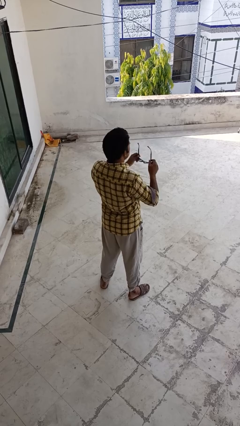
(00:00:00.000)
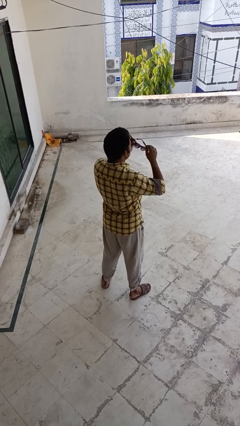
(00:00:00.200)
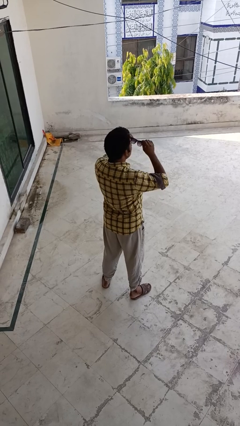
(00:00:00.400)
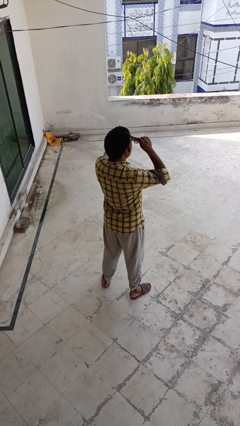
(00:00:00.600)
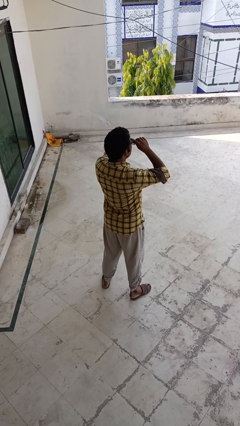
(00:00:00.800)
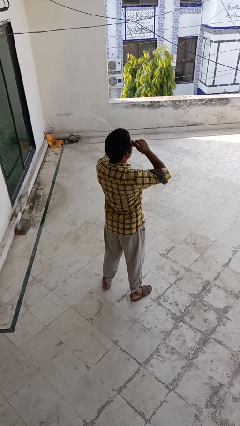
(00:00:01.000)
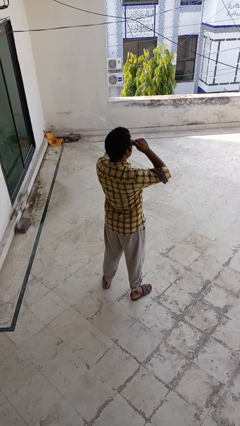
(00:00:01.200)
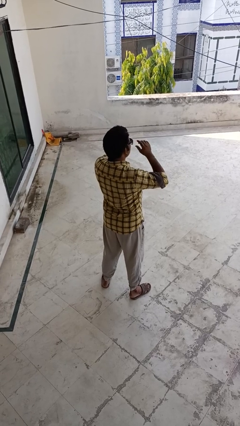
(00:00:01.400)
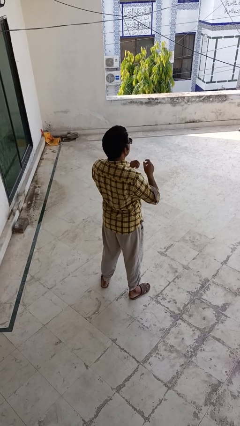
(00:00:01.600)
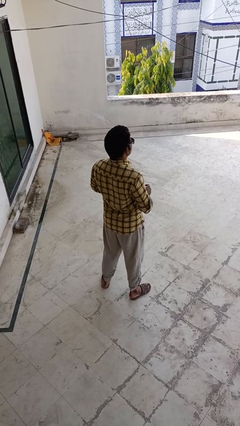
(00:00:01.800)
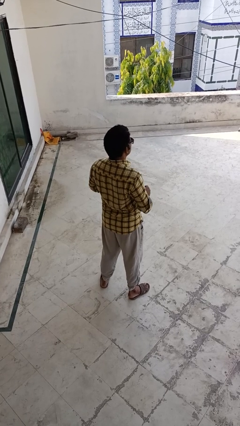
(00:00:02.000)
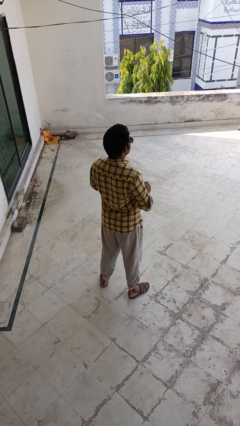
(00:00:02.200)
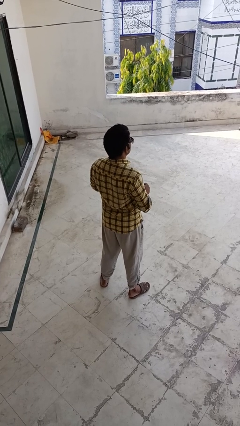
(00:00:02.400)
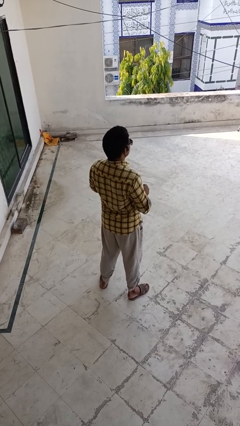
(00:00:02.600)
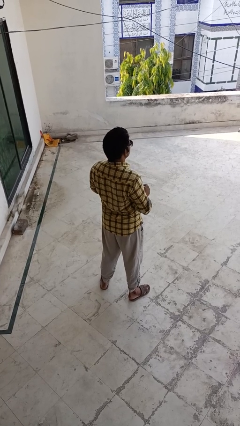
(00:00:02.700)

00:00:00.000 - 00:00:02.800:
person puts on sunglasses

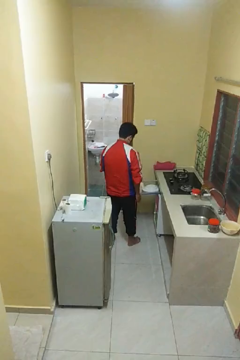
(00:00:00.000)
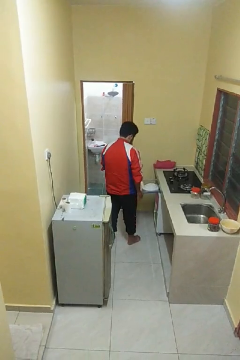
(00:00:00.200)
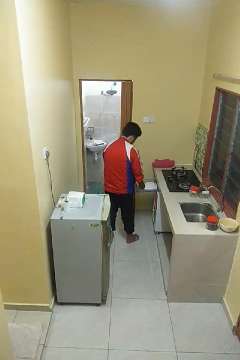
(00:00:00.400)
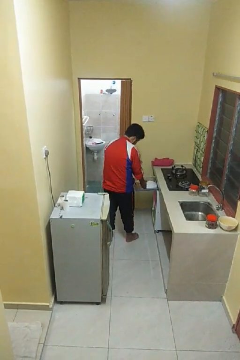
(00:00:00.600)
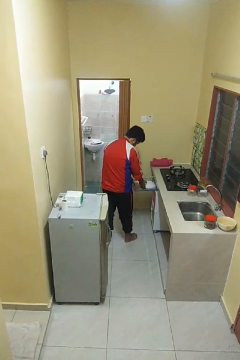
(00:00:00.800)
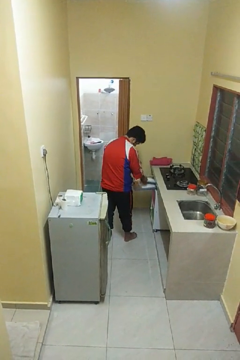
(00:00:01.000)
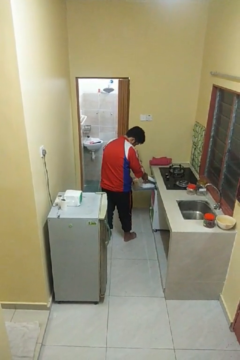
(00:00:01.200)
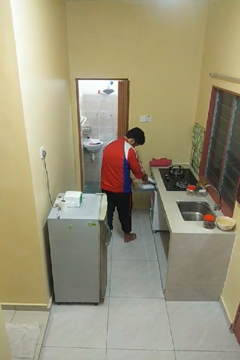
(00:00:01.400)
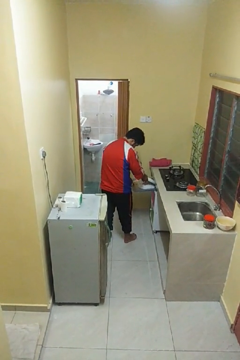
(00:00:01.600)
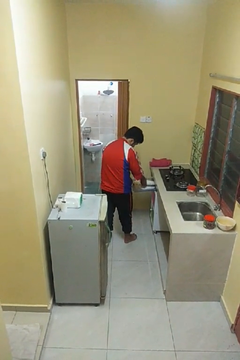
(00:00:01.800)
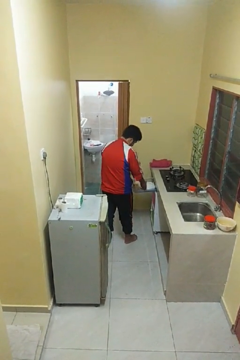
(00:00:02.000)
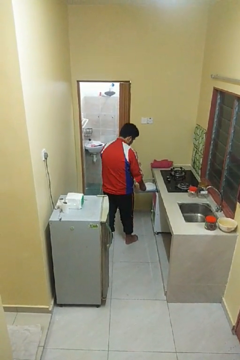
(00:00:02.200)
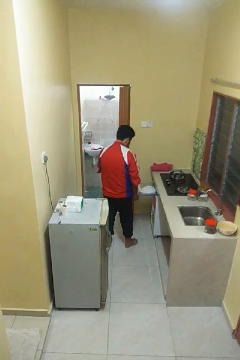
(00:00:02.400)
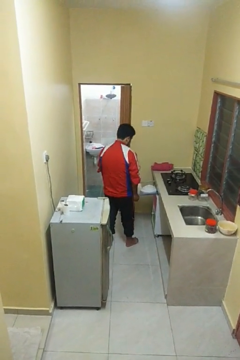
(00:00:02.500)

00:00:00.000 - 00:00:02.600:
person searches in kitchen drawer

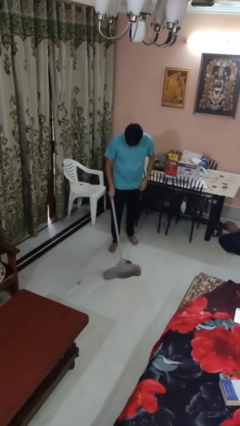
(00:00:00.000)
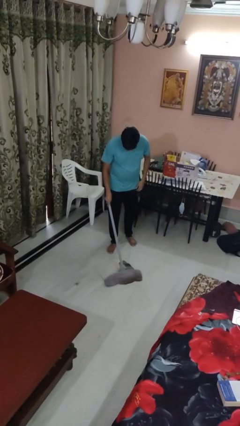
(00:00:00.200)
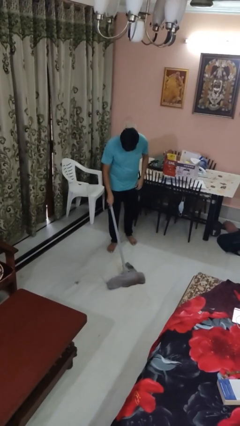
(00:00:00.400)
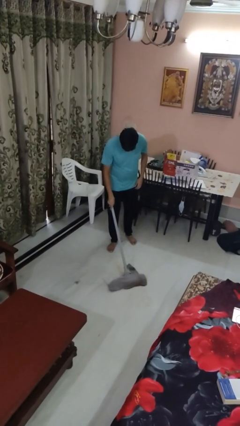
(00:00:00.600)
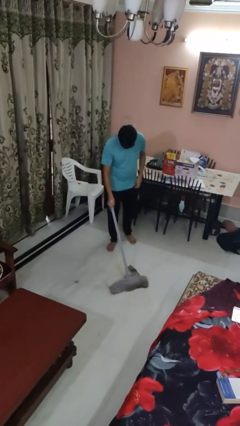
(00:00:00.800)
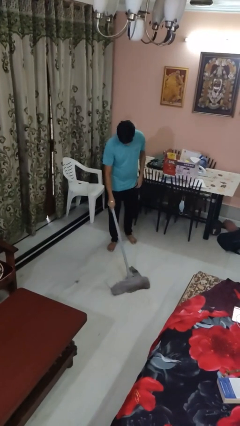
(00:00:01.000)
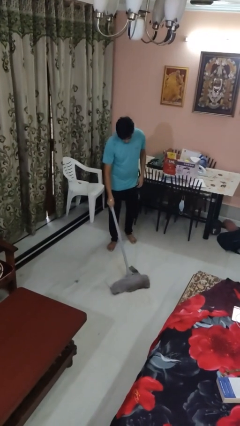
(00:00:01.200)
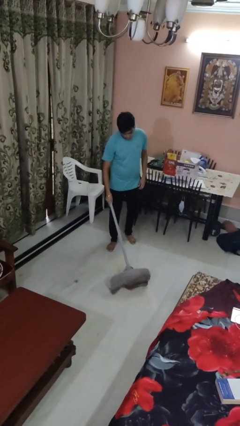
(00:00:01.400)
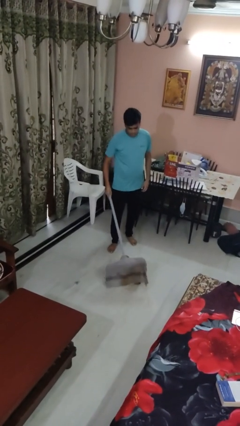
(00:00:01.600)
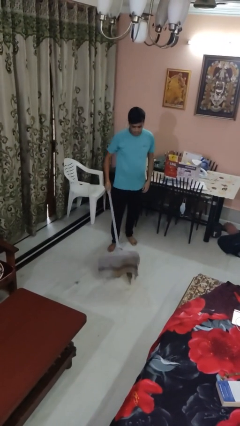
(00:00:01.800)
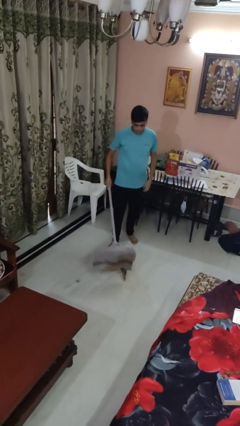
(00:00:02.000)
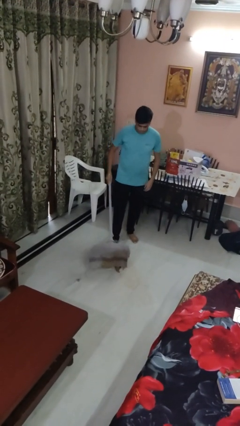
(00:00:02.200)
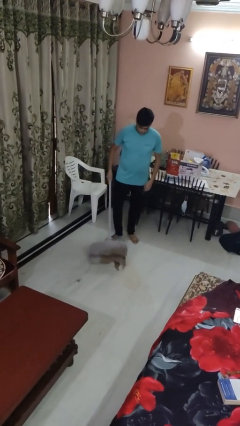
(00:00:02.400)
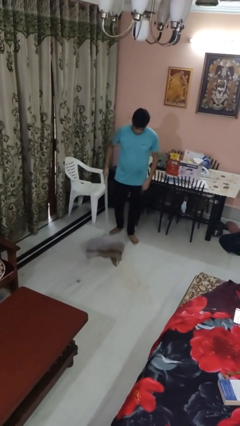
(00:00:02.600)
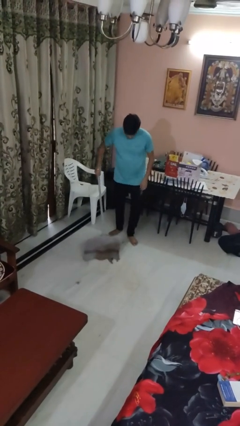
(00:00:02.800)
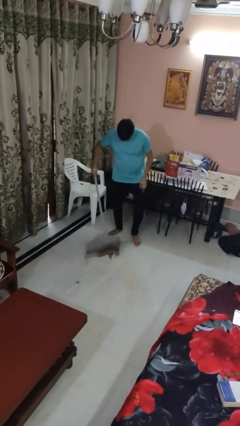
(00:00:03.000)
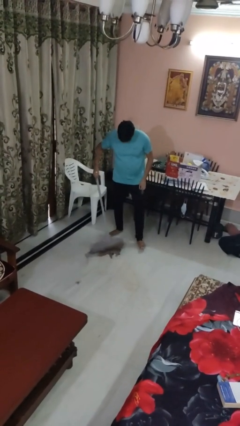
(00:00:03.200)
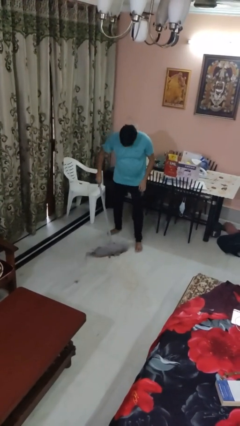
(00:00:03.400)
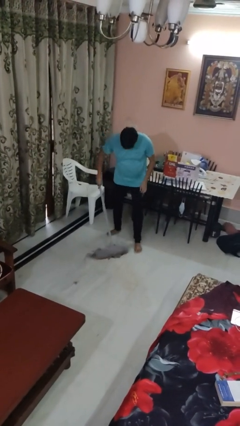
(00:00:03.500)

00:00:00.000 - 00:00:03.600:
person mops

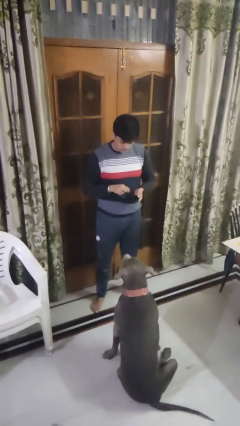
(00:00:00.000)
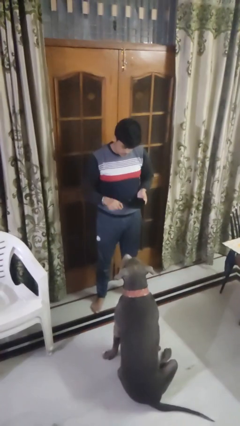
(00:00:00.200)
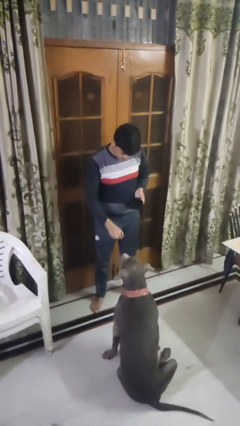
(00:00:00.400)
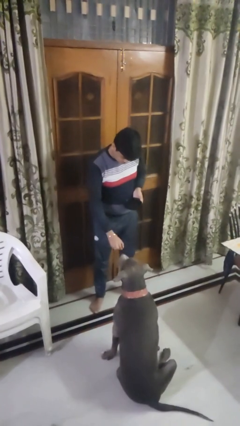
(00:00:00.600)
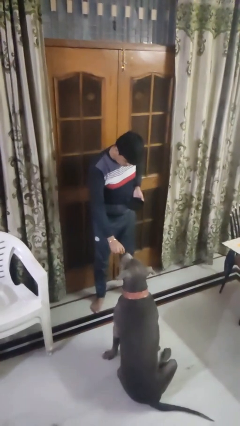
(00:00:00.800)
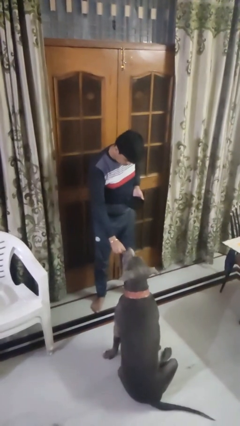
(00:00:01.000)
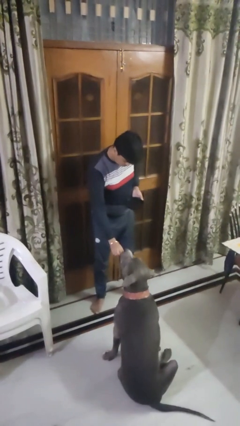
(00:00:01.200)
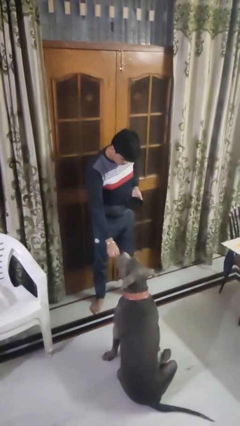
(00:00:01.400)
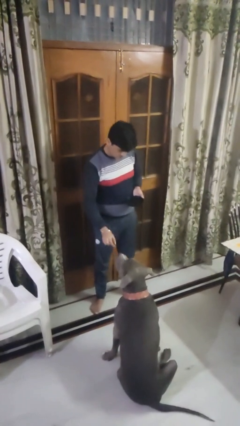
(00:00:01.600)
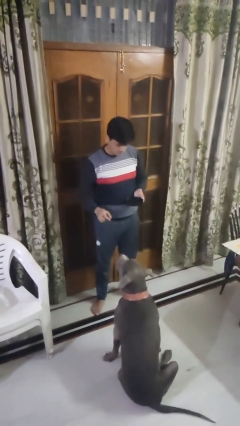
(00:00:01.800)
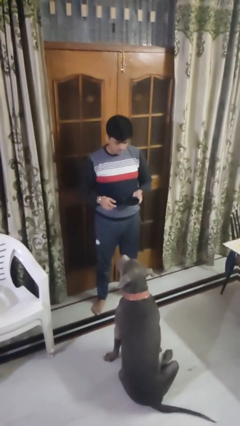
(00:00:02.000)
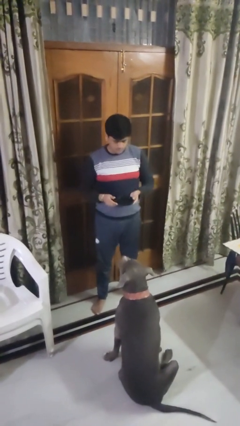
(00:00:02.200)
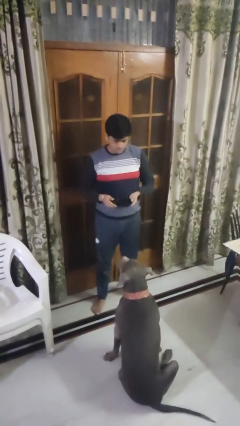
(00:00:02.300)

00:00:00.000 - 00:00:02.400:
person feeds dog

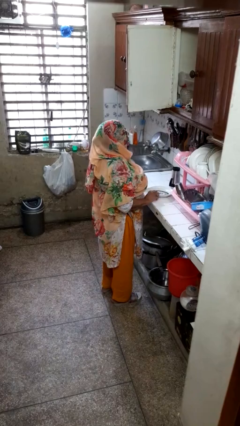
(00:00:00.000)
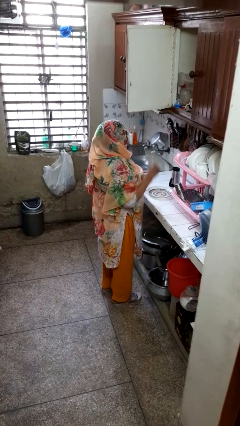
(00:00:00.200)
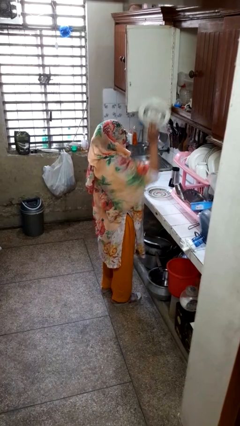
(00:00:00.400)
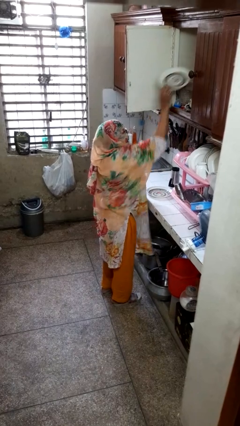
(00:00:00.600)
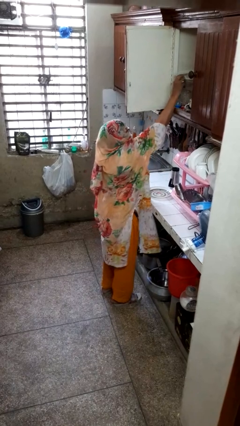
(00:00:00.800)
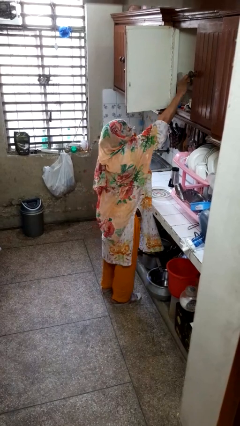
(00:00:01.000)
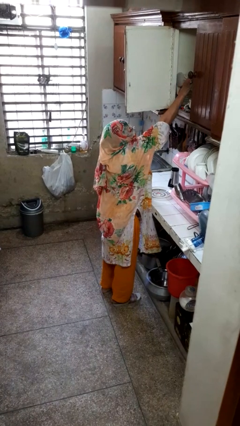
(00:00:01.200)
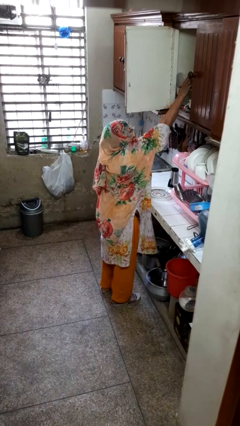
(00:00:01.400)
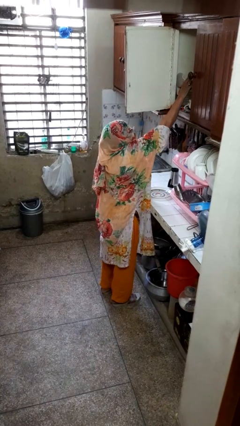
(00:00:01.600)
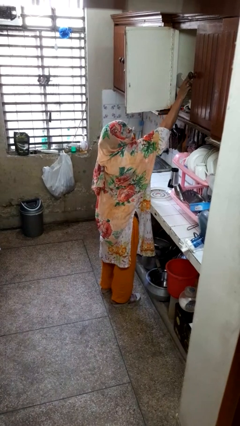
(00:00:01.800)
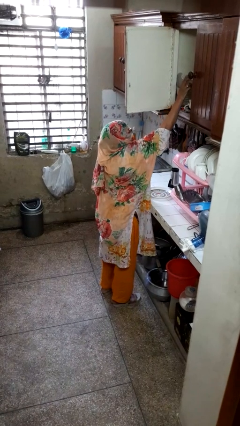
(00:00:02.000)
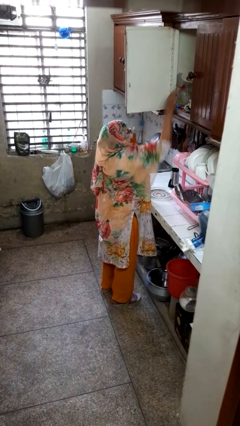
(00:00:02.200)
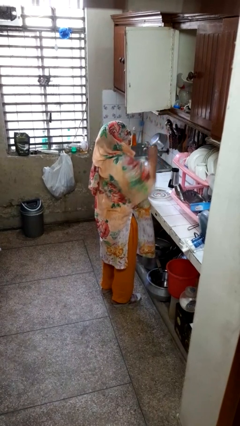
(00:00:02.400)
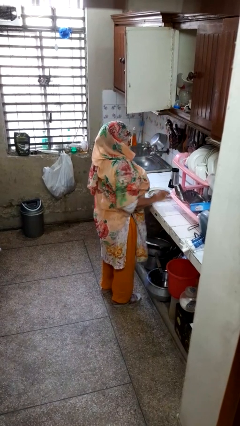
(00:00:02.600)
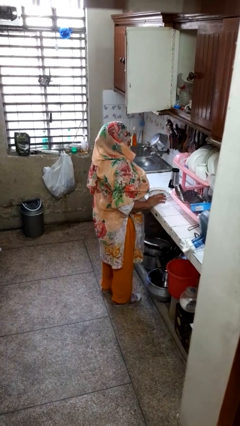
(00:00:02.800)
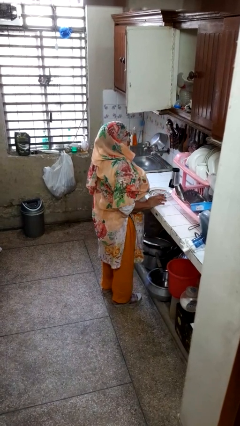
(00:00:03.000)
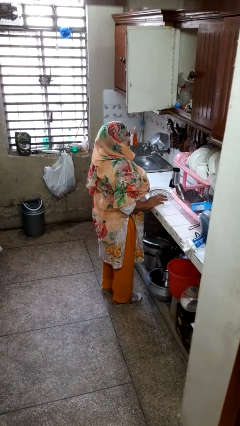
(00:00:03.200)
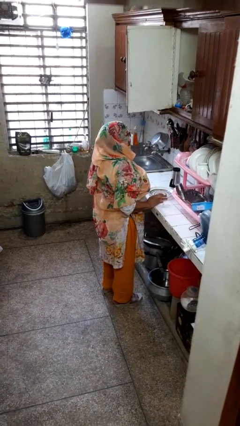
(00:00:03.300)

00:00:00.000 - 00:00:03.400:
person puts object in cabinet

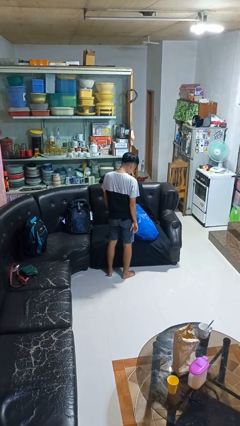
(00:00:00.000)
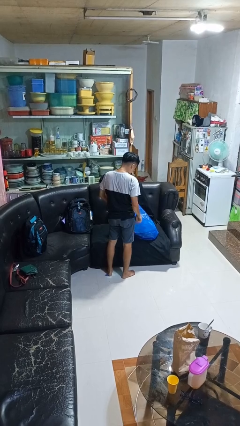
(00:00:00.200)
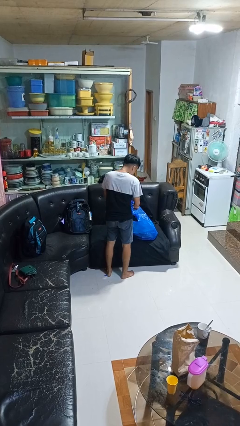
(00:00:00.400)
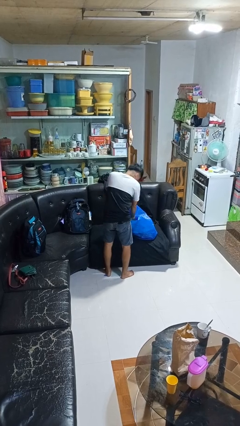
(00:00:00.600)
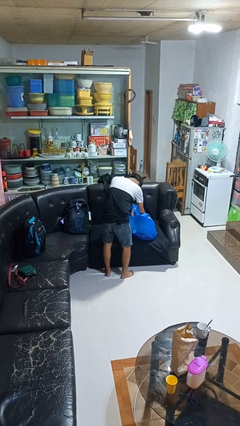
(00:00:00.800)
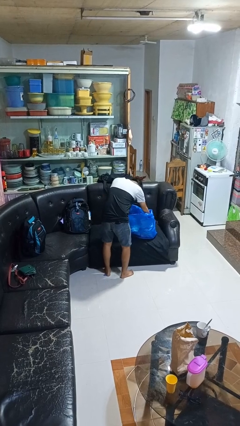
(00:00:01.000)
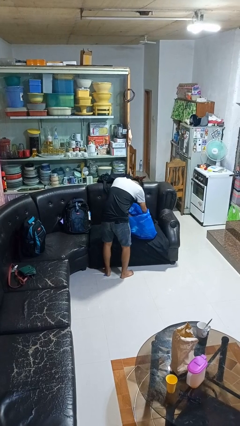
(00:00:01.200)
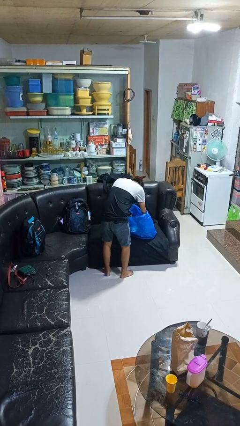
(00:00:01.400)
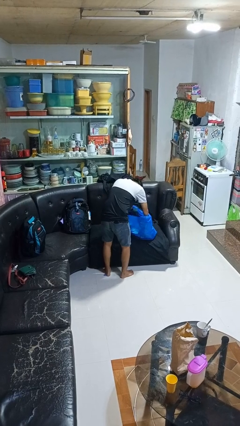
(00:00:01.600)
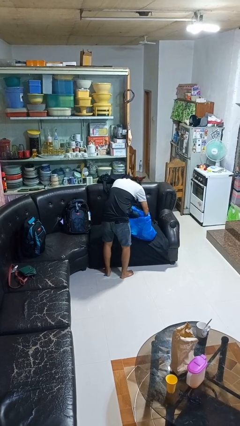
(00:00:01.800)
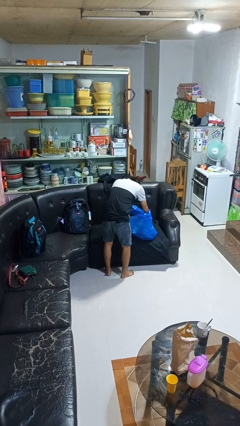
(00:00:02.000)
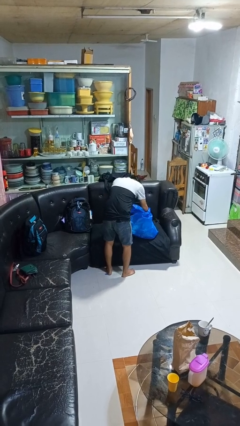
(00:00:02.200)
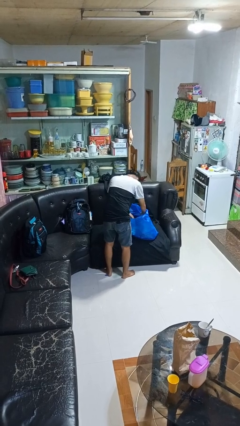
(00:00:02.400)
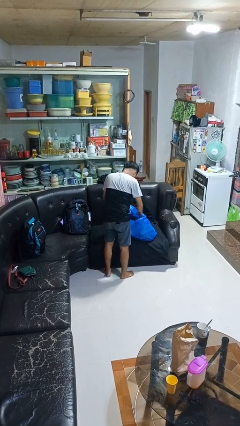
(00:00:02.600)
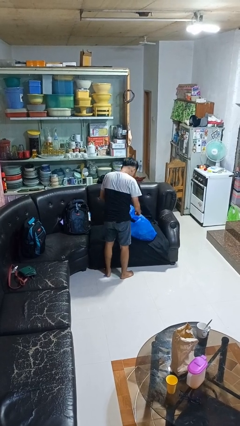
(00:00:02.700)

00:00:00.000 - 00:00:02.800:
person searches in bag
